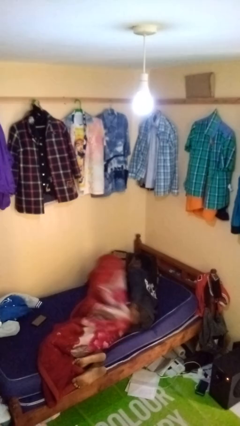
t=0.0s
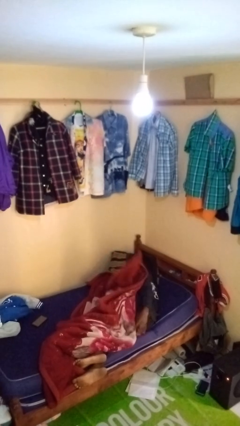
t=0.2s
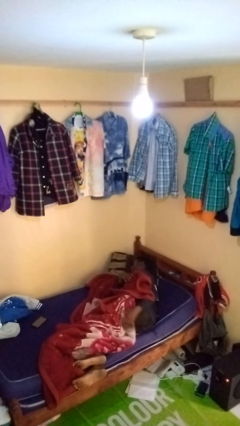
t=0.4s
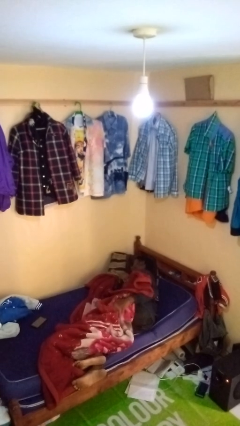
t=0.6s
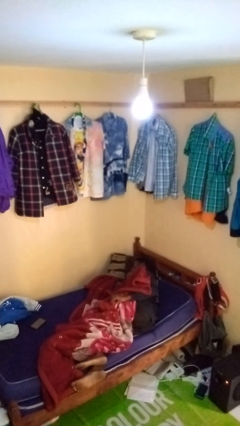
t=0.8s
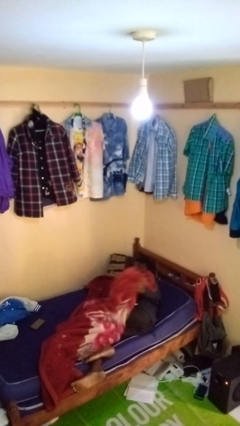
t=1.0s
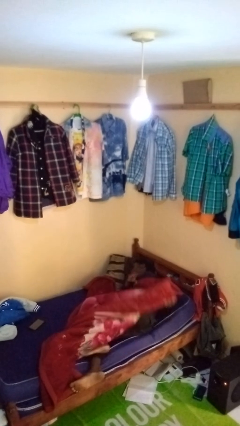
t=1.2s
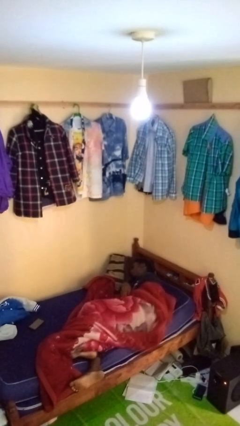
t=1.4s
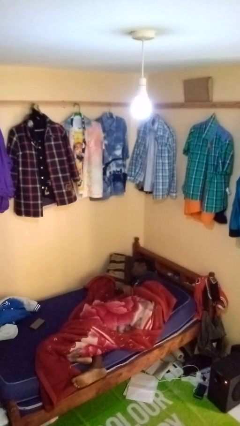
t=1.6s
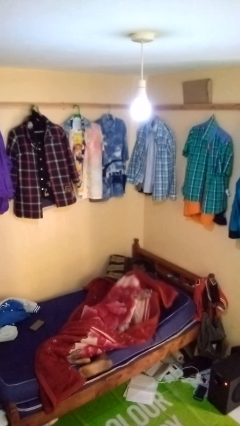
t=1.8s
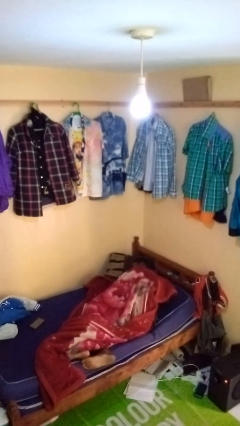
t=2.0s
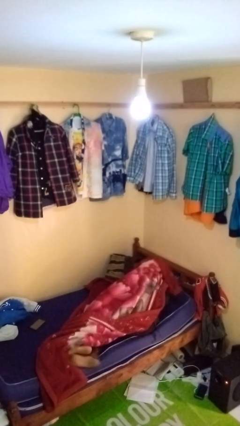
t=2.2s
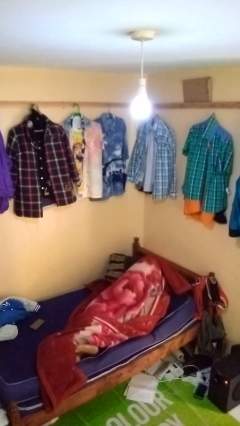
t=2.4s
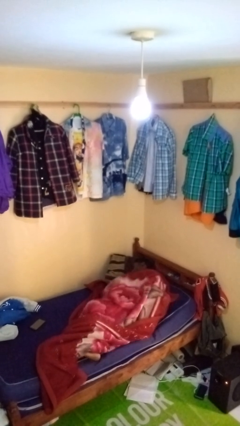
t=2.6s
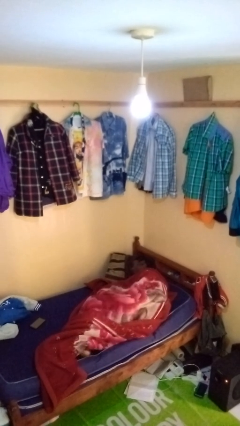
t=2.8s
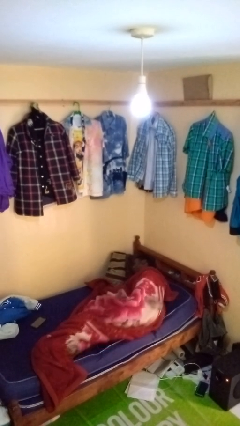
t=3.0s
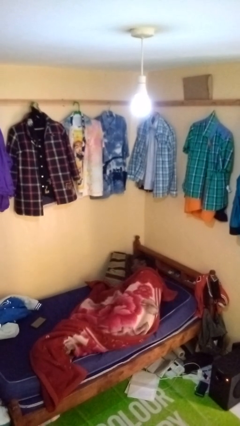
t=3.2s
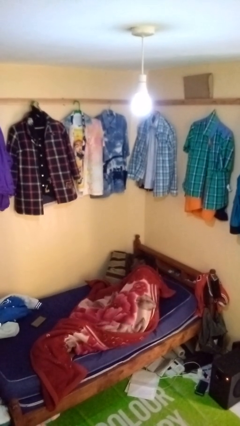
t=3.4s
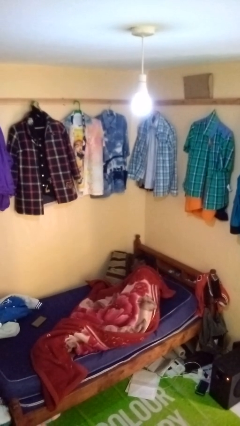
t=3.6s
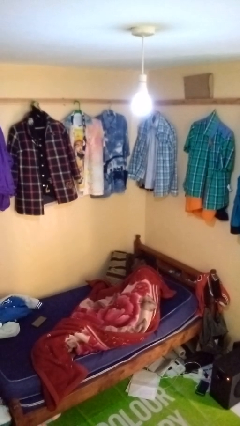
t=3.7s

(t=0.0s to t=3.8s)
person covers with blanket

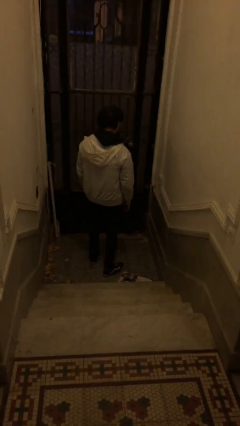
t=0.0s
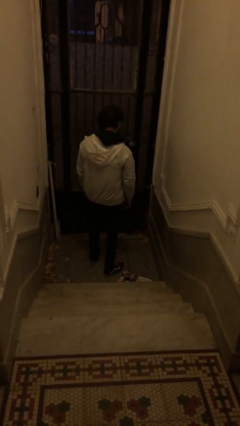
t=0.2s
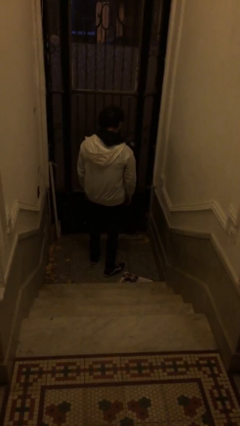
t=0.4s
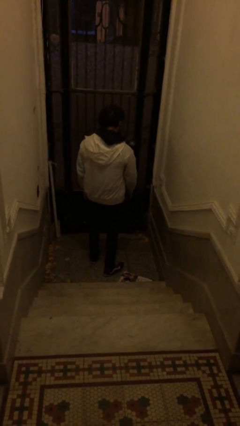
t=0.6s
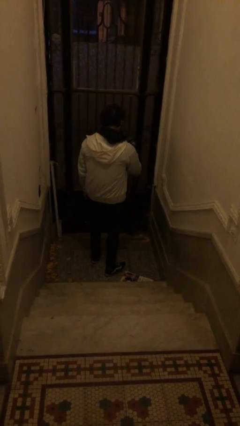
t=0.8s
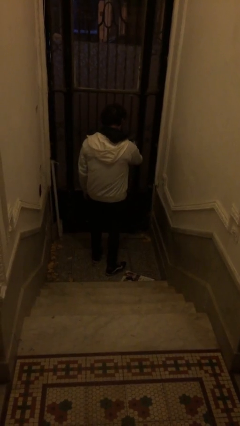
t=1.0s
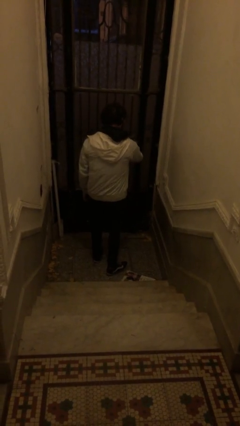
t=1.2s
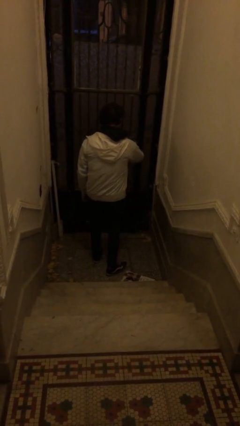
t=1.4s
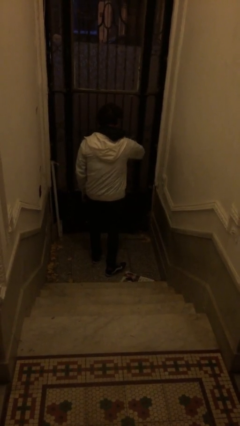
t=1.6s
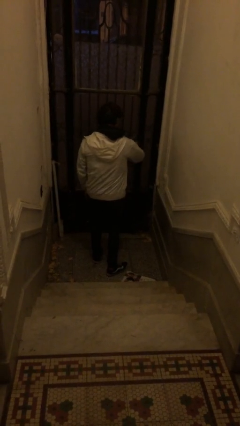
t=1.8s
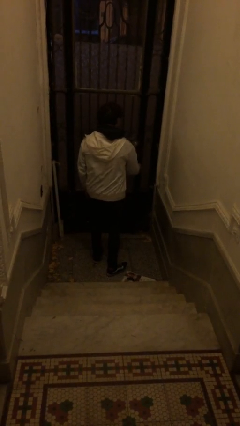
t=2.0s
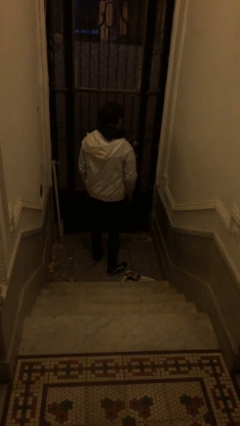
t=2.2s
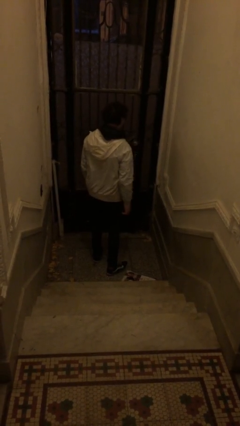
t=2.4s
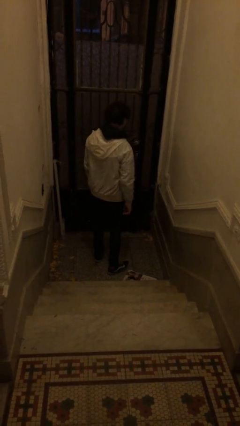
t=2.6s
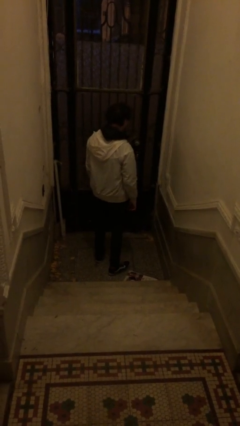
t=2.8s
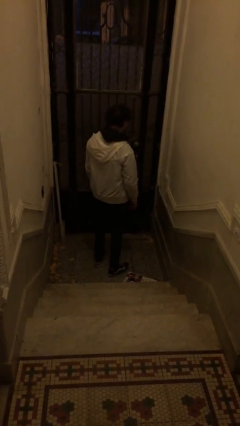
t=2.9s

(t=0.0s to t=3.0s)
person unlocks door with keys

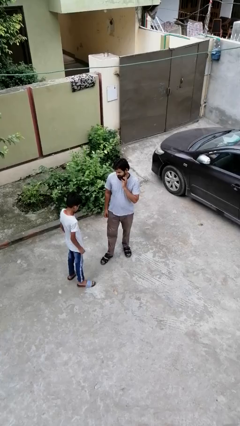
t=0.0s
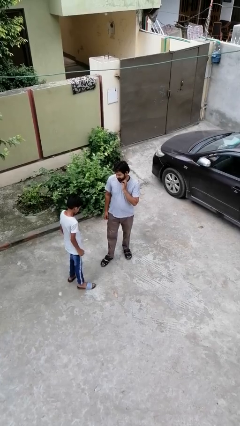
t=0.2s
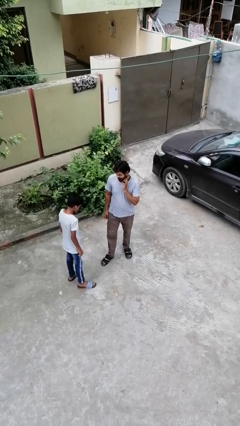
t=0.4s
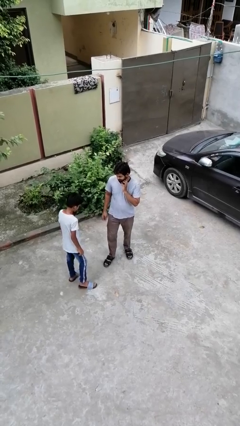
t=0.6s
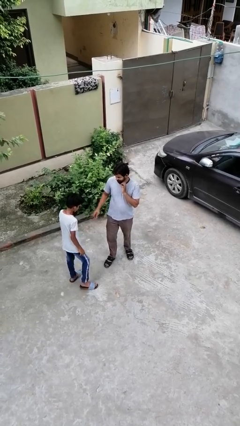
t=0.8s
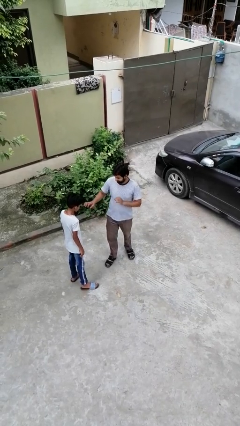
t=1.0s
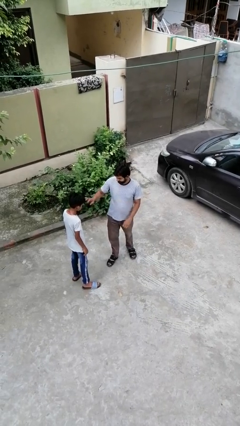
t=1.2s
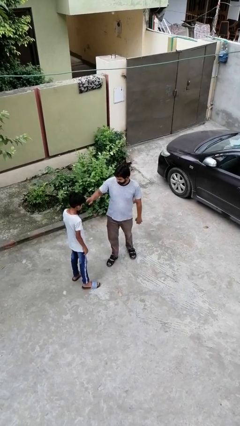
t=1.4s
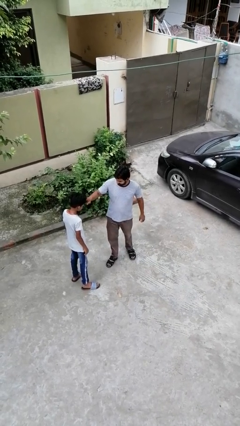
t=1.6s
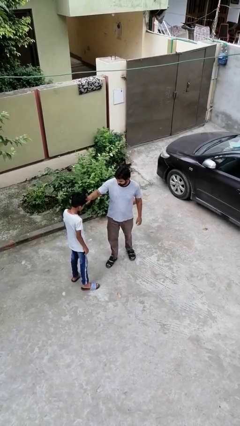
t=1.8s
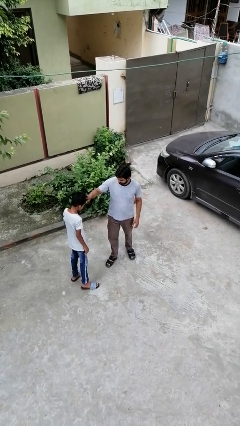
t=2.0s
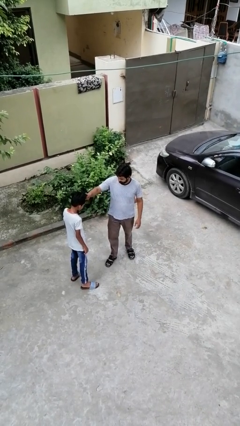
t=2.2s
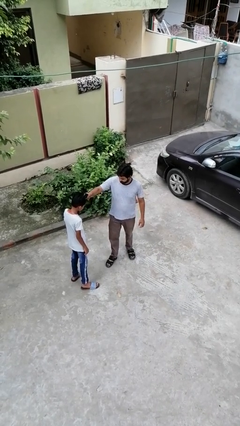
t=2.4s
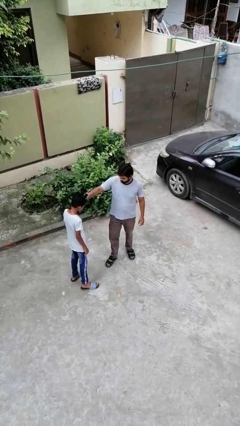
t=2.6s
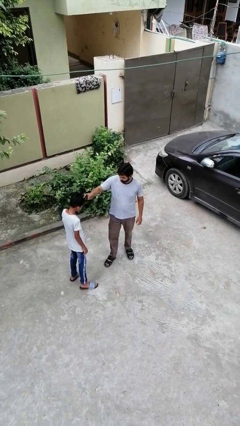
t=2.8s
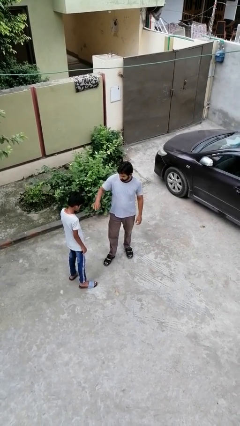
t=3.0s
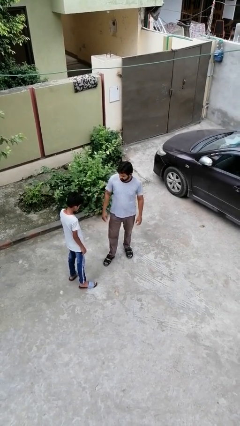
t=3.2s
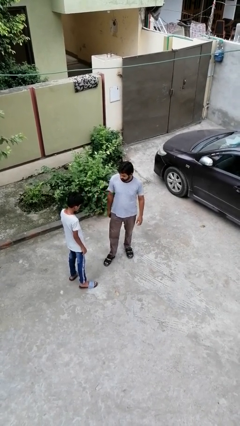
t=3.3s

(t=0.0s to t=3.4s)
person grabs person by hair

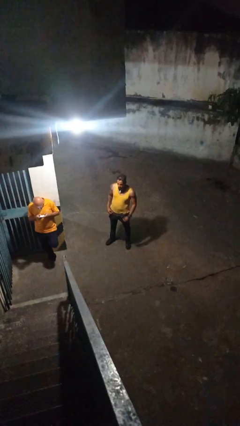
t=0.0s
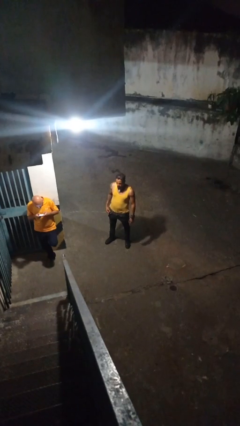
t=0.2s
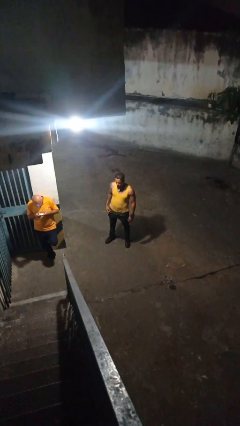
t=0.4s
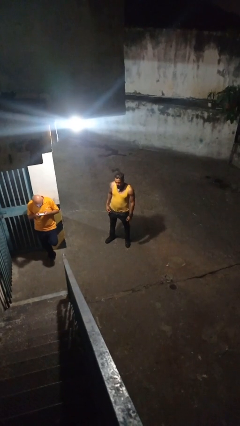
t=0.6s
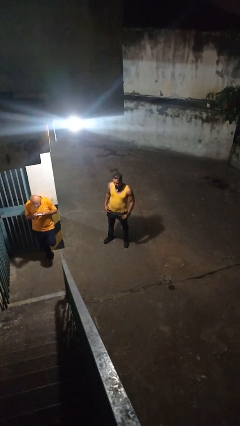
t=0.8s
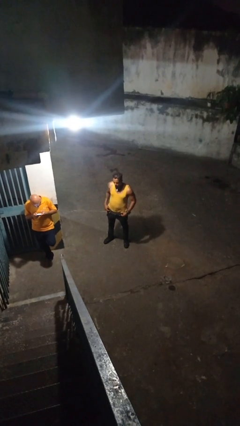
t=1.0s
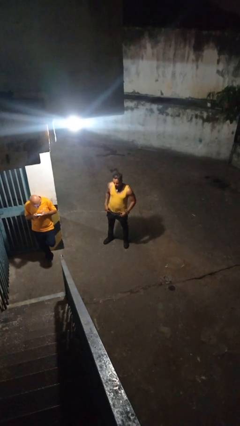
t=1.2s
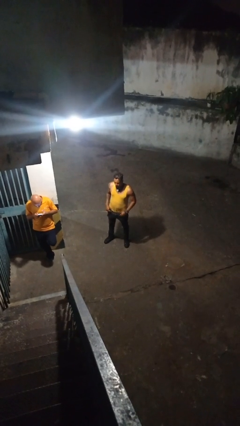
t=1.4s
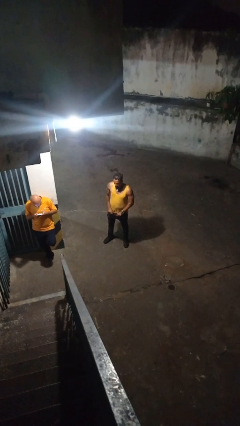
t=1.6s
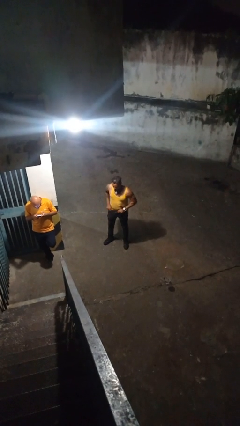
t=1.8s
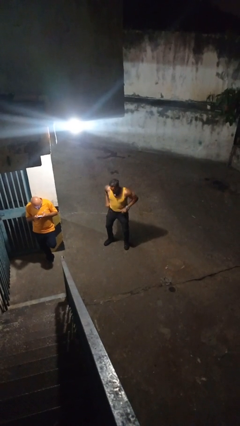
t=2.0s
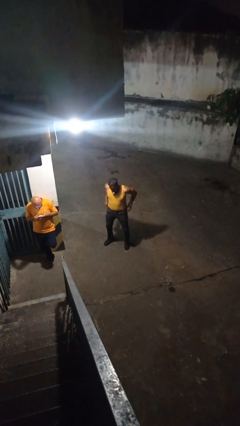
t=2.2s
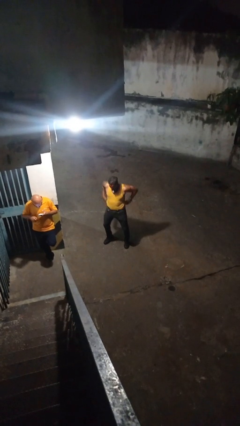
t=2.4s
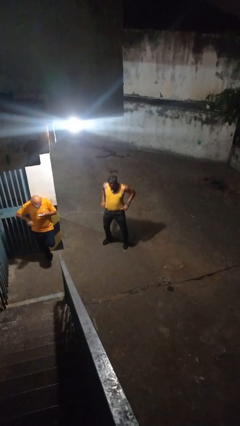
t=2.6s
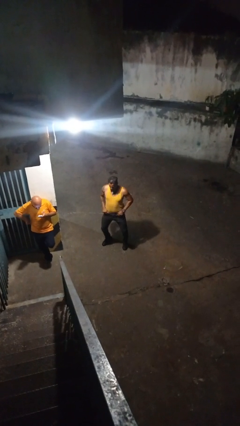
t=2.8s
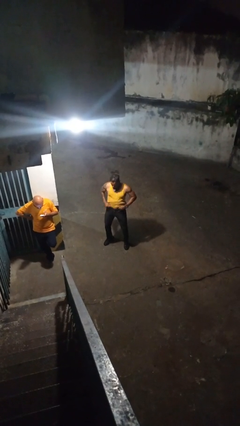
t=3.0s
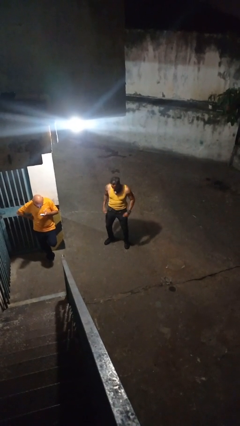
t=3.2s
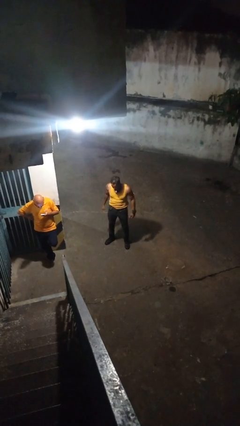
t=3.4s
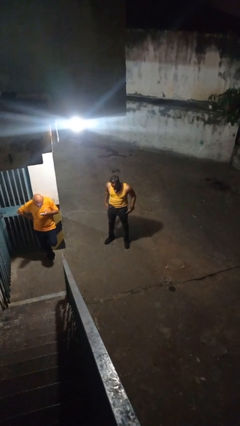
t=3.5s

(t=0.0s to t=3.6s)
person hikes up pants

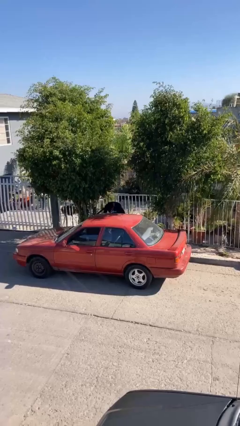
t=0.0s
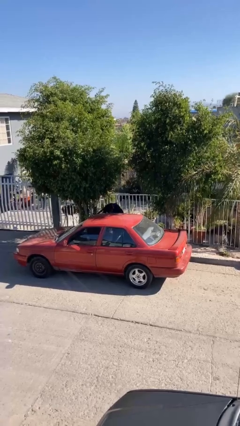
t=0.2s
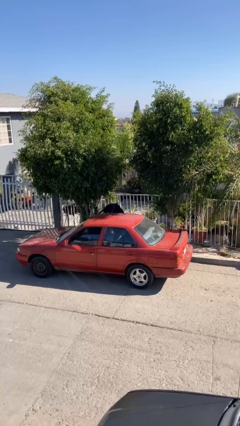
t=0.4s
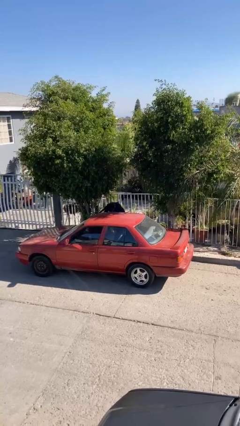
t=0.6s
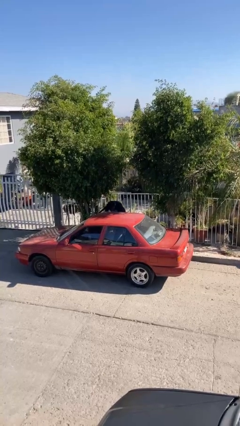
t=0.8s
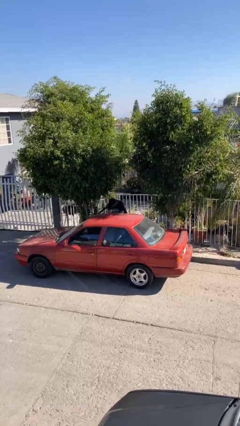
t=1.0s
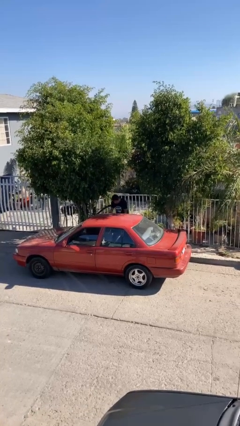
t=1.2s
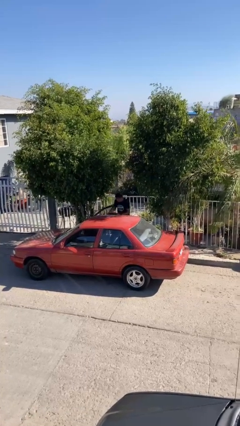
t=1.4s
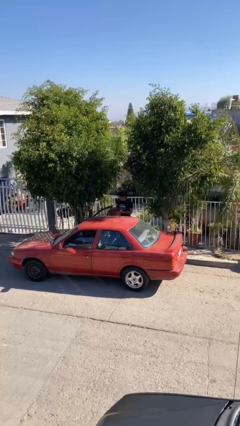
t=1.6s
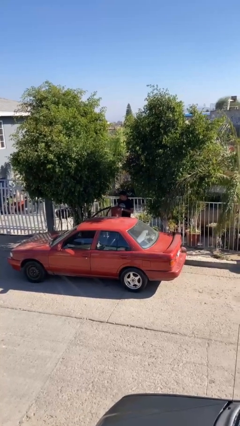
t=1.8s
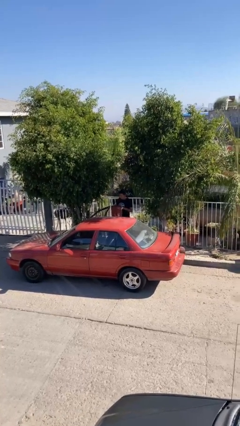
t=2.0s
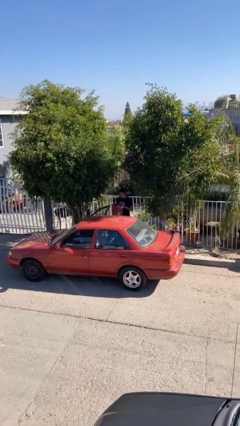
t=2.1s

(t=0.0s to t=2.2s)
person unloads car

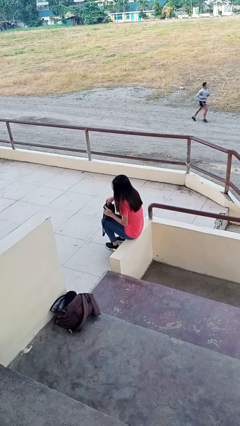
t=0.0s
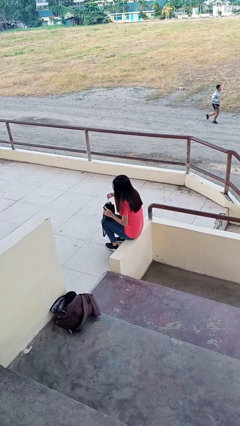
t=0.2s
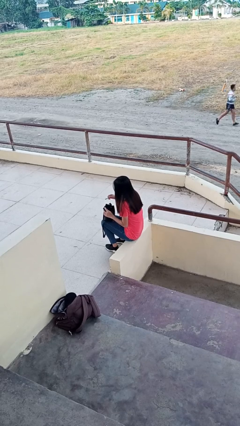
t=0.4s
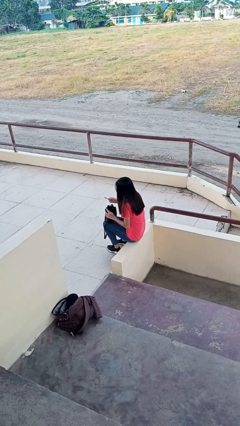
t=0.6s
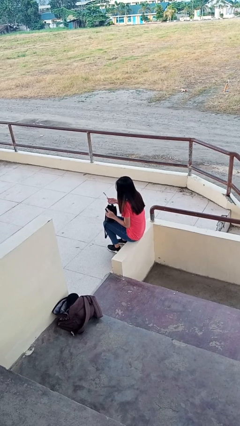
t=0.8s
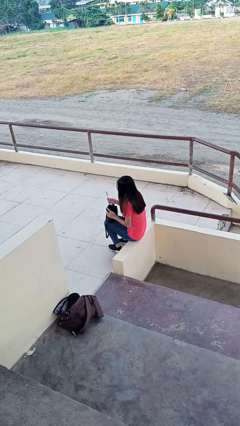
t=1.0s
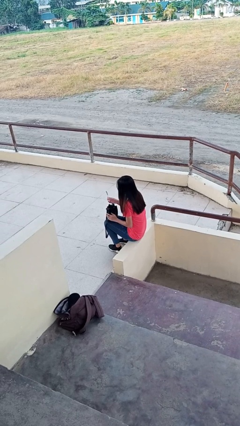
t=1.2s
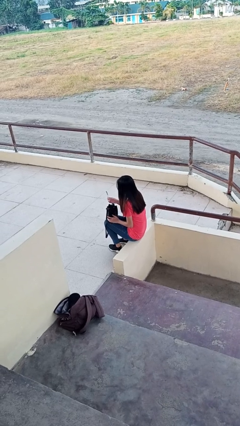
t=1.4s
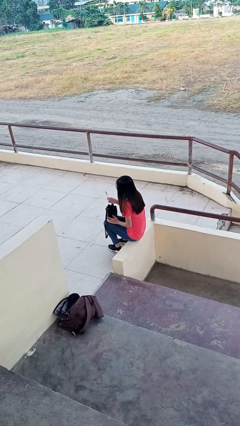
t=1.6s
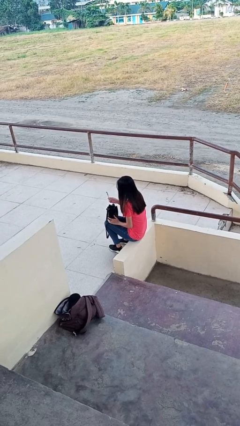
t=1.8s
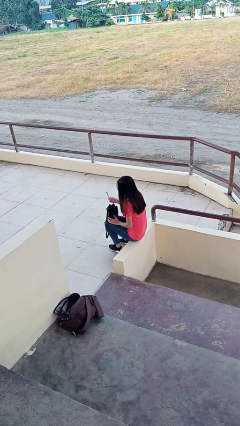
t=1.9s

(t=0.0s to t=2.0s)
person takes object from purse
